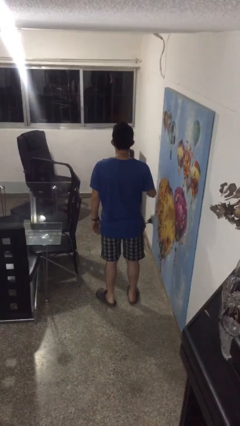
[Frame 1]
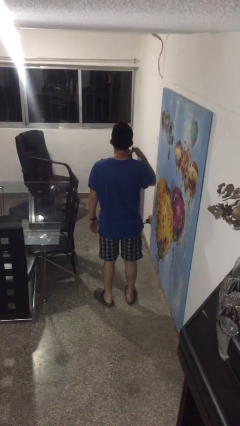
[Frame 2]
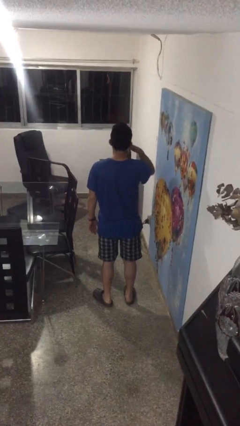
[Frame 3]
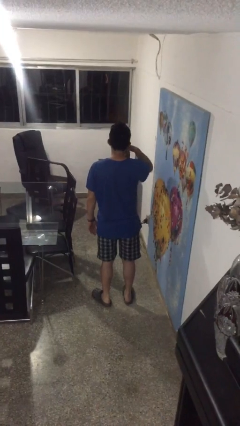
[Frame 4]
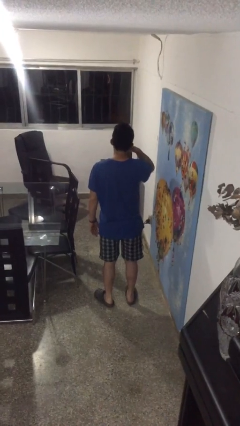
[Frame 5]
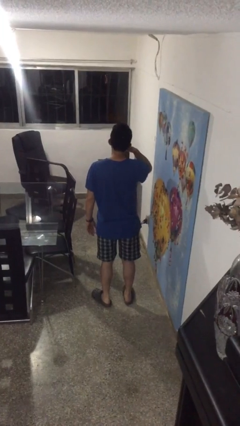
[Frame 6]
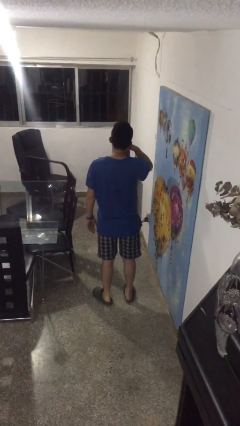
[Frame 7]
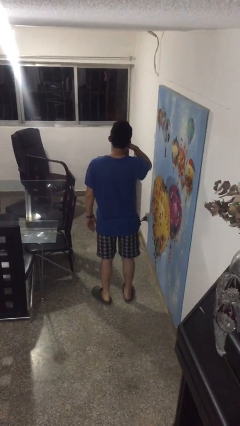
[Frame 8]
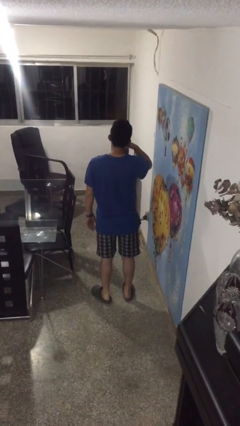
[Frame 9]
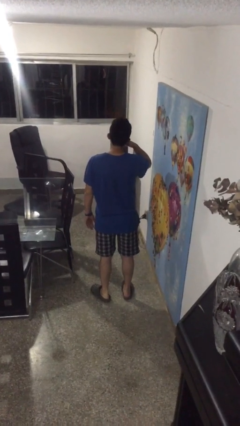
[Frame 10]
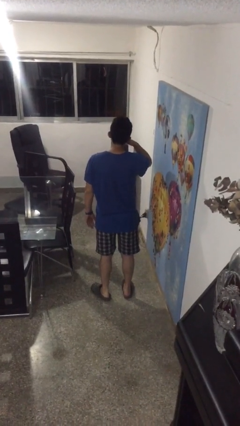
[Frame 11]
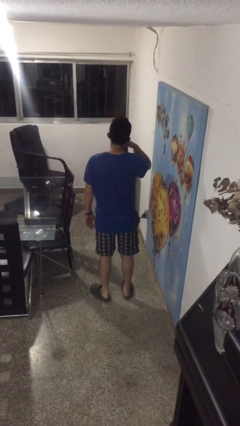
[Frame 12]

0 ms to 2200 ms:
person gestures call me

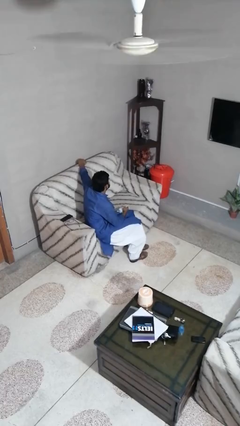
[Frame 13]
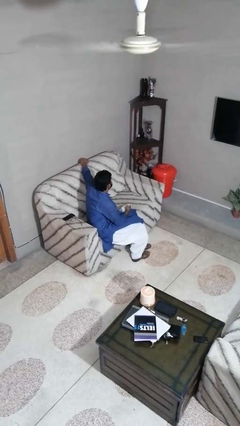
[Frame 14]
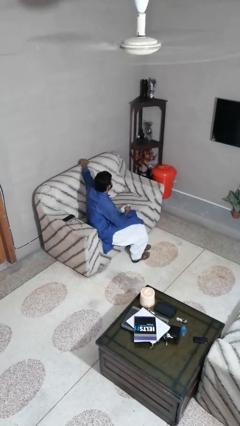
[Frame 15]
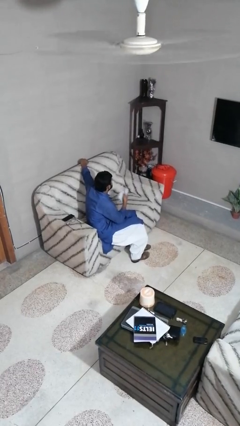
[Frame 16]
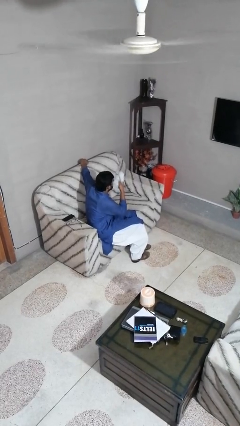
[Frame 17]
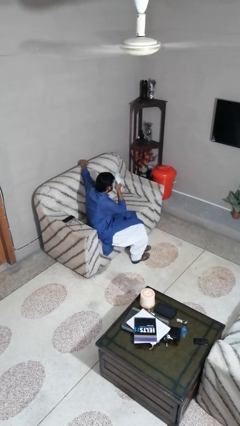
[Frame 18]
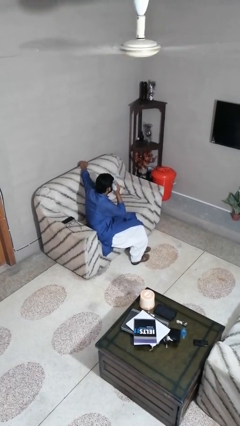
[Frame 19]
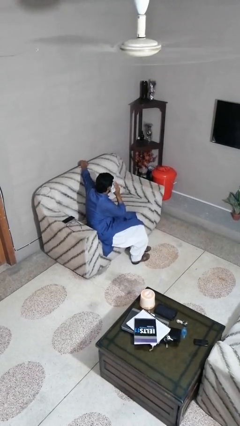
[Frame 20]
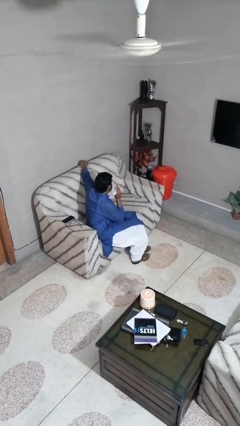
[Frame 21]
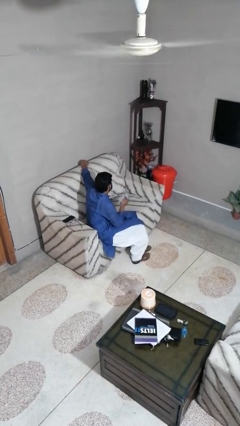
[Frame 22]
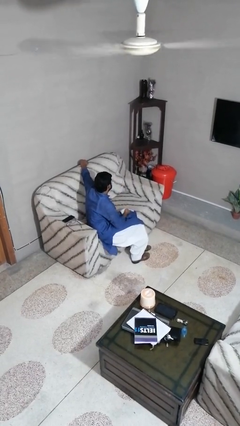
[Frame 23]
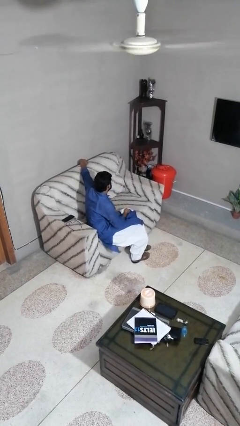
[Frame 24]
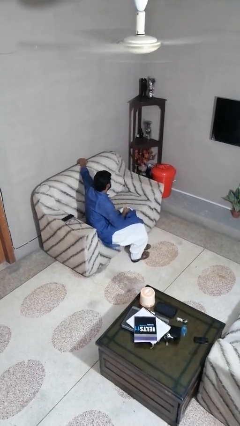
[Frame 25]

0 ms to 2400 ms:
person wipes mouth with napkin

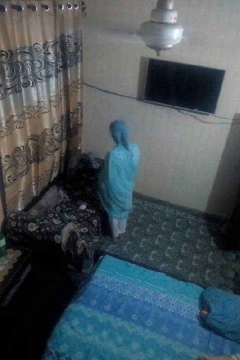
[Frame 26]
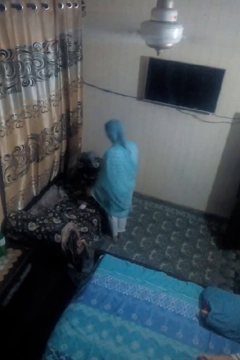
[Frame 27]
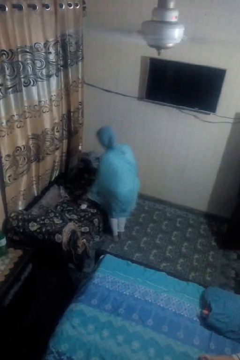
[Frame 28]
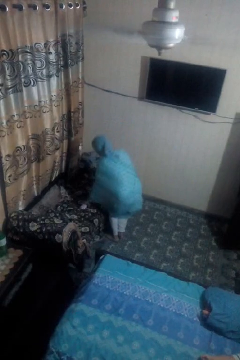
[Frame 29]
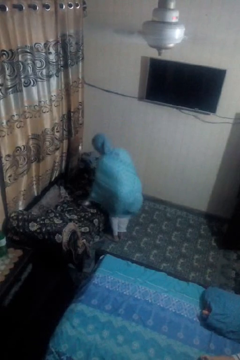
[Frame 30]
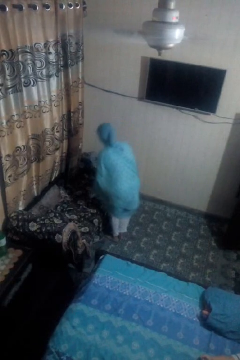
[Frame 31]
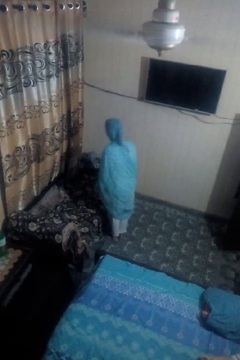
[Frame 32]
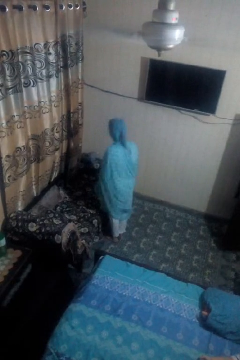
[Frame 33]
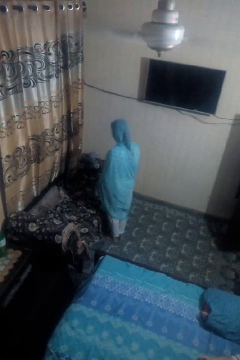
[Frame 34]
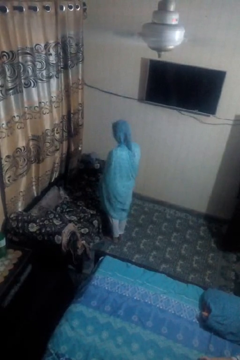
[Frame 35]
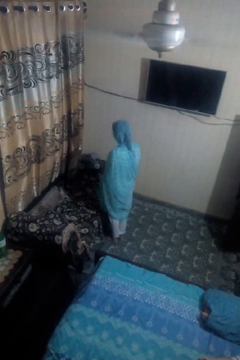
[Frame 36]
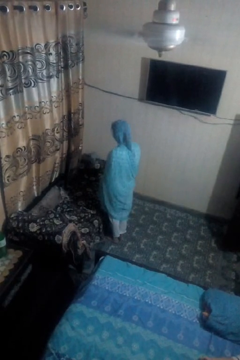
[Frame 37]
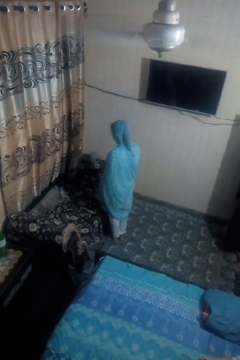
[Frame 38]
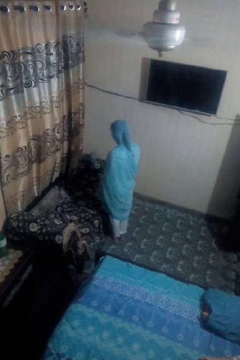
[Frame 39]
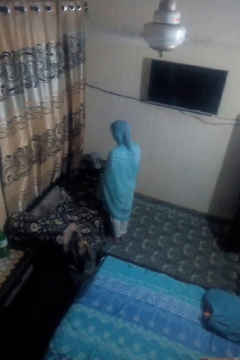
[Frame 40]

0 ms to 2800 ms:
person picks up object from couch

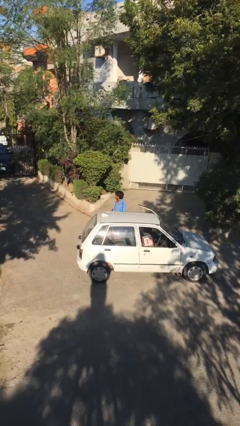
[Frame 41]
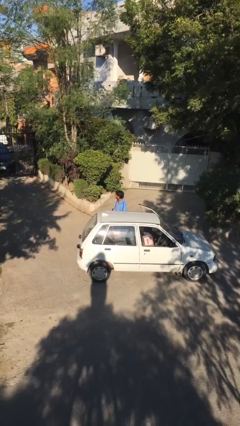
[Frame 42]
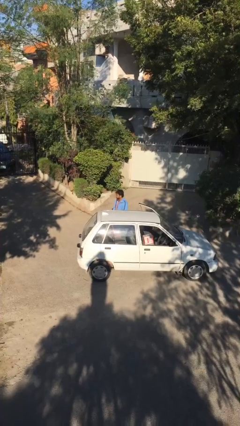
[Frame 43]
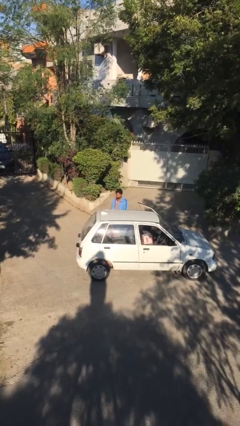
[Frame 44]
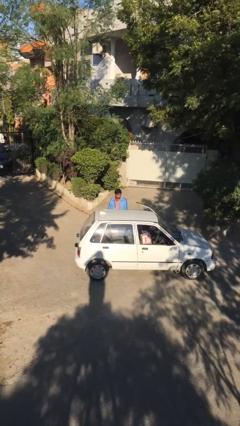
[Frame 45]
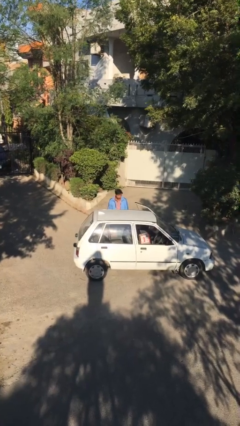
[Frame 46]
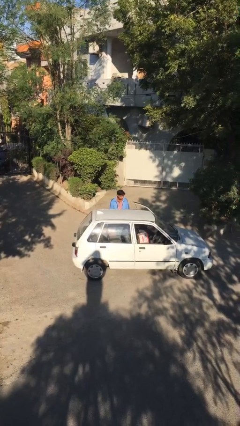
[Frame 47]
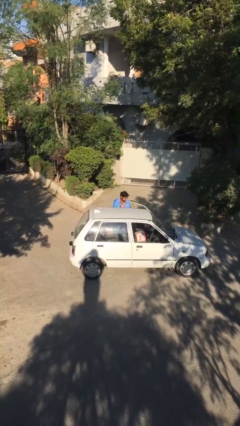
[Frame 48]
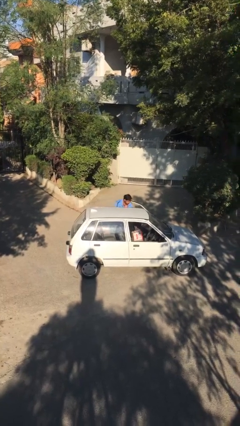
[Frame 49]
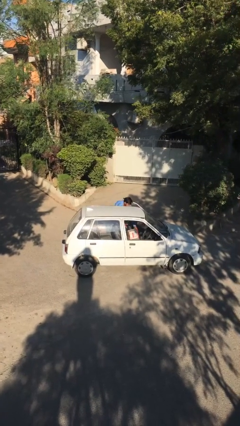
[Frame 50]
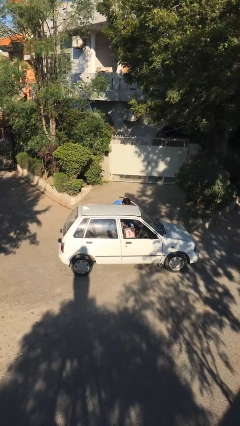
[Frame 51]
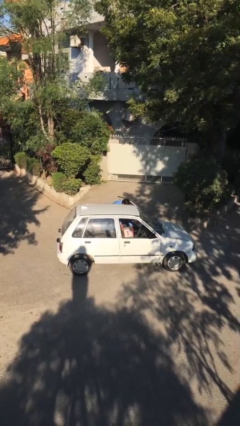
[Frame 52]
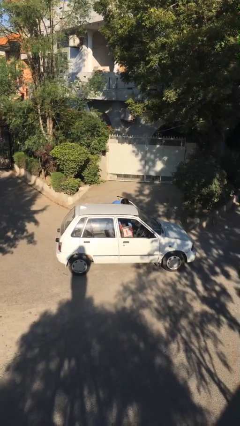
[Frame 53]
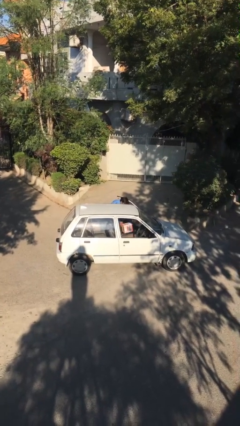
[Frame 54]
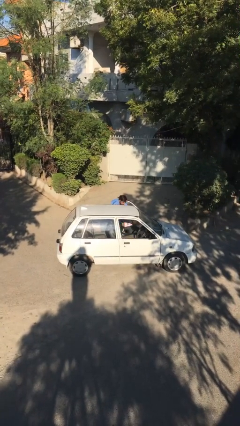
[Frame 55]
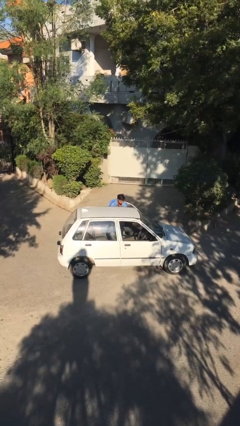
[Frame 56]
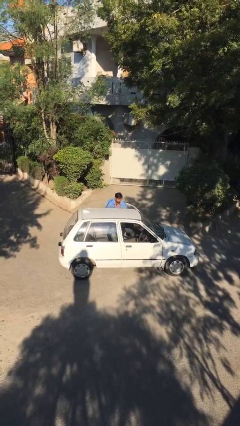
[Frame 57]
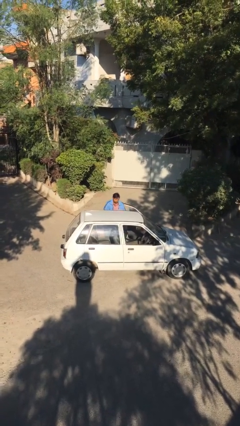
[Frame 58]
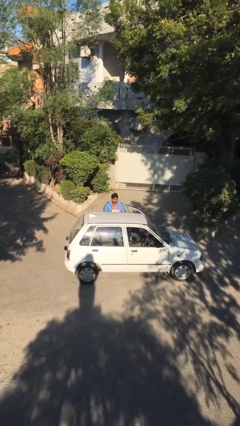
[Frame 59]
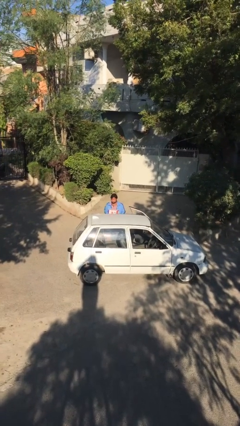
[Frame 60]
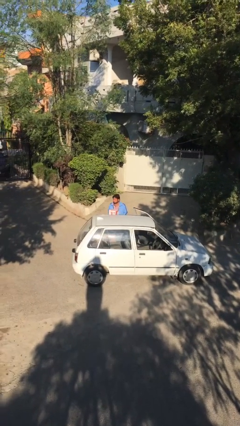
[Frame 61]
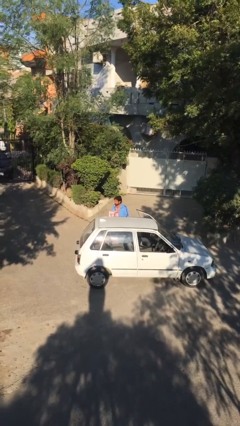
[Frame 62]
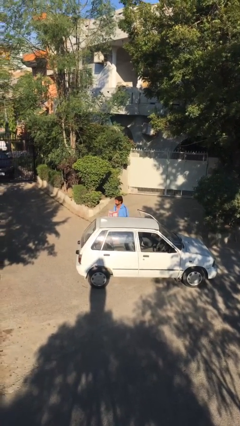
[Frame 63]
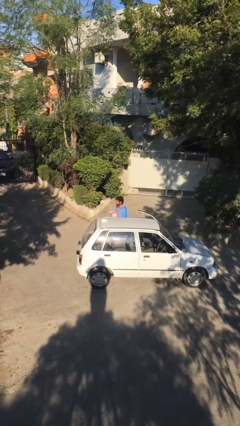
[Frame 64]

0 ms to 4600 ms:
person unloads car

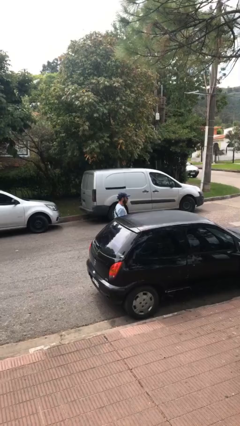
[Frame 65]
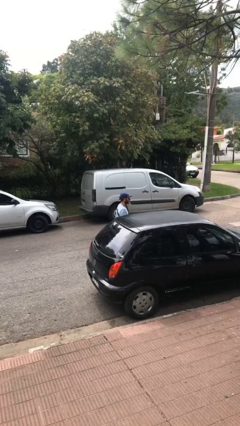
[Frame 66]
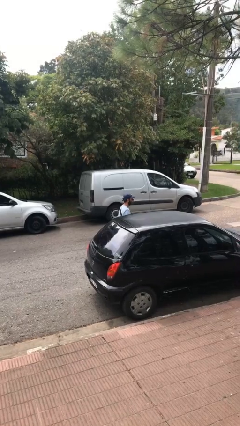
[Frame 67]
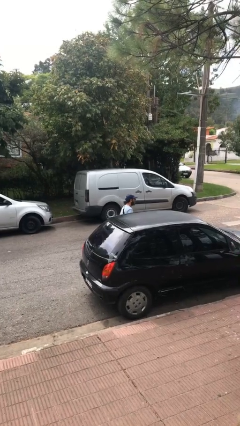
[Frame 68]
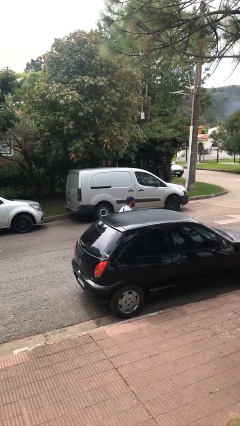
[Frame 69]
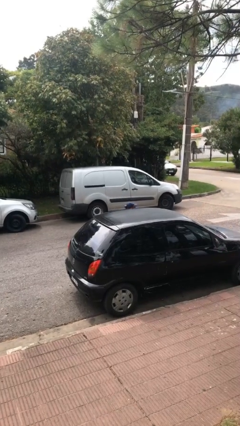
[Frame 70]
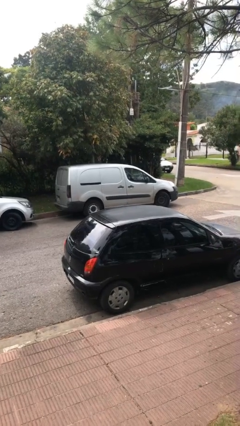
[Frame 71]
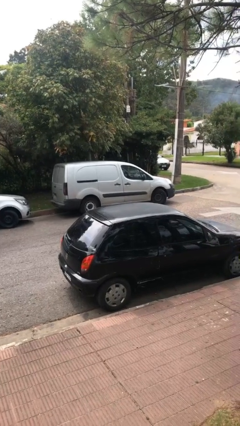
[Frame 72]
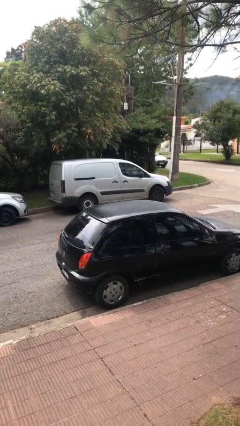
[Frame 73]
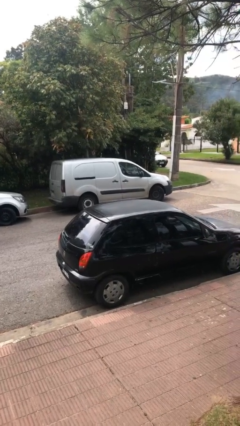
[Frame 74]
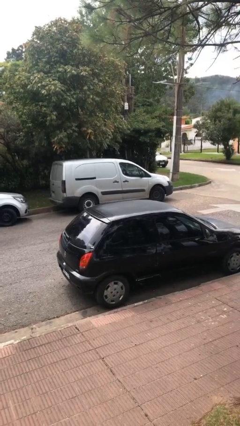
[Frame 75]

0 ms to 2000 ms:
person enters car

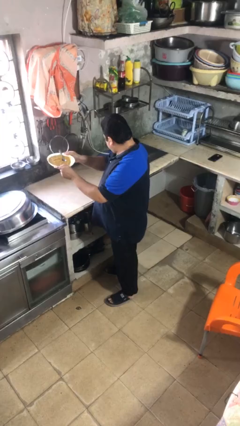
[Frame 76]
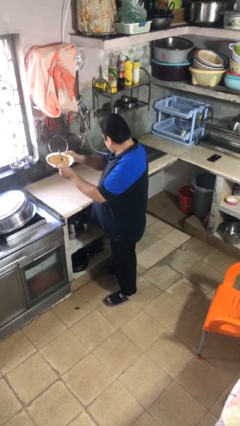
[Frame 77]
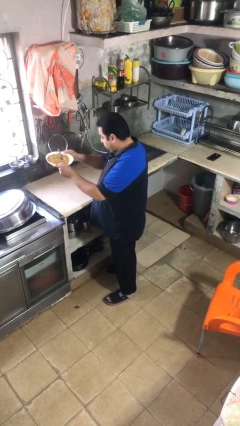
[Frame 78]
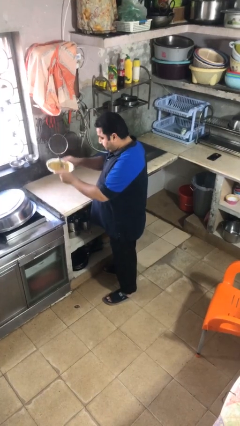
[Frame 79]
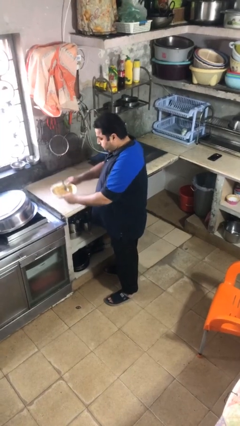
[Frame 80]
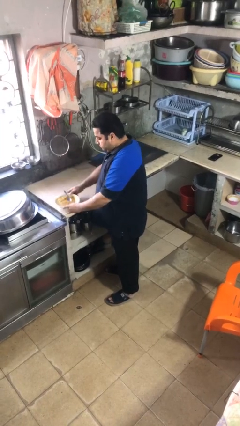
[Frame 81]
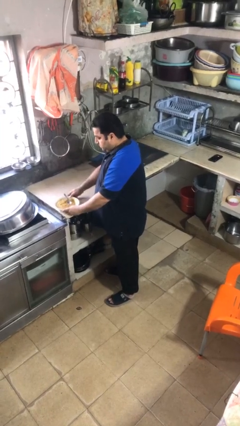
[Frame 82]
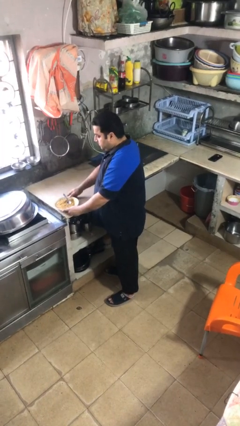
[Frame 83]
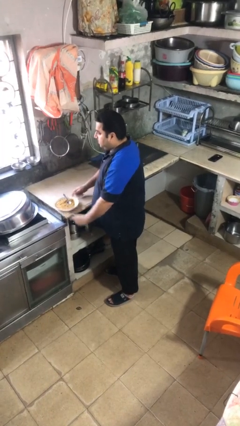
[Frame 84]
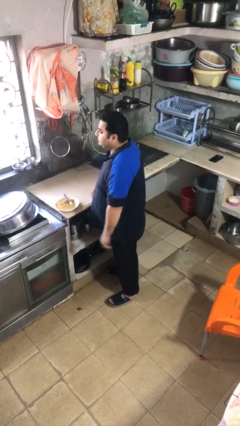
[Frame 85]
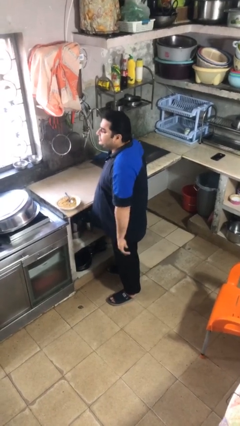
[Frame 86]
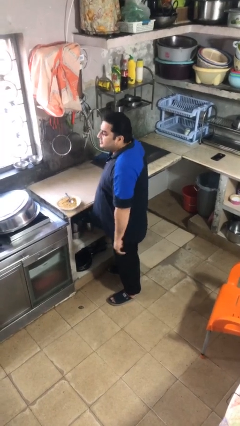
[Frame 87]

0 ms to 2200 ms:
person puts down object on countertop

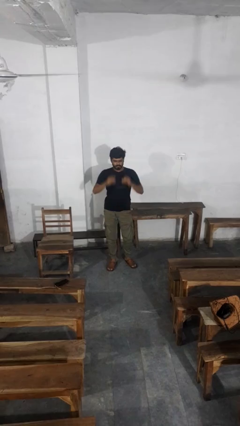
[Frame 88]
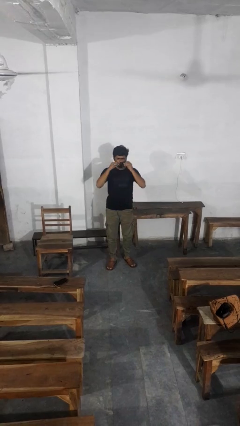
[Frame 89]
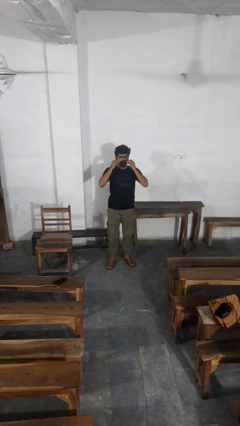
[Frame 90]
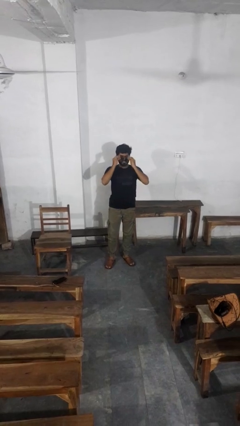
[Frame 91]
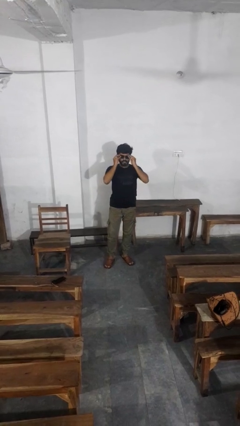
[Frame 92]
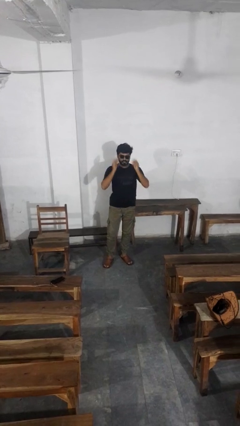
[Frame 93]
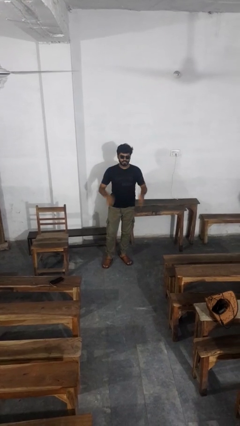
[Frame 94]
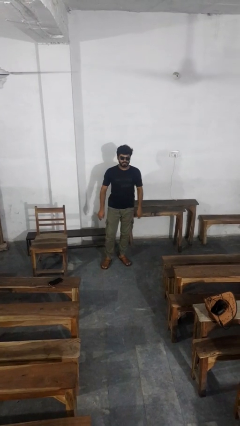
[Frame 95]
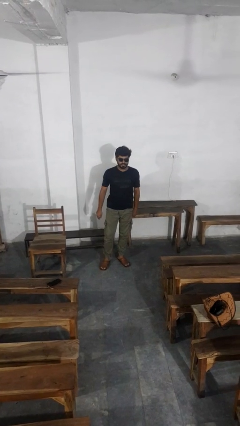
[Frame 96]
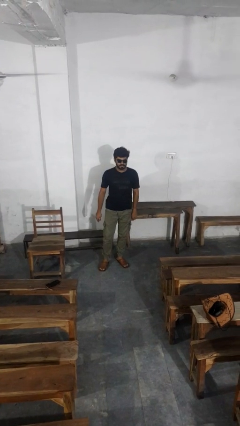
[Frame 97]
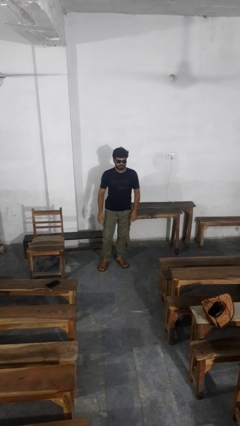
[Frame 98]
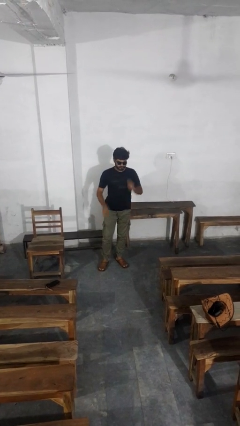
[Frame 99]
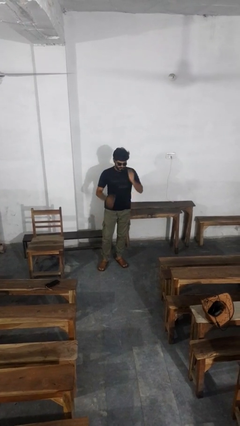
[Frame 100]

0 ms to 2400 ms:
person puts on sunglasses
